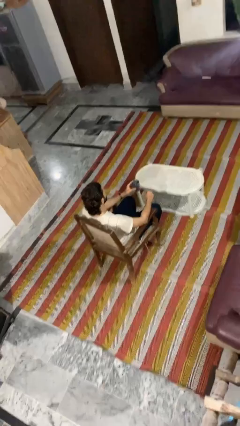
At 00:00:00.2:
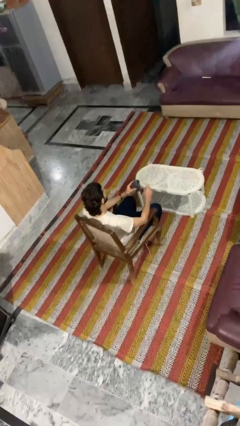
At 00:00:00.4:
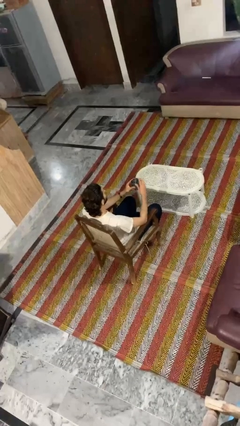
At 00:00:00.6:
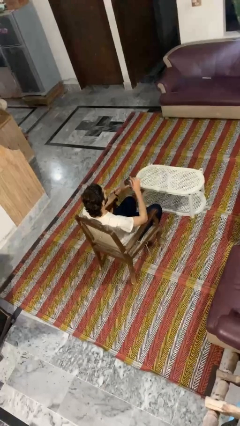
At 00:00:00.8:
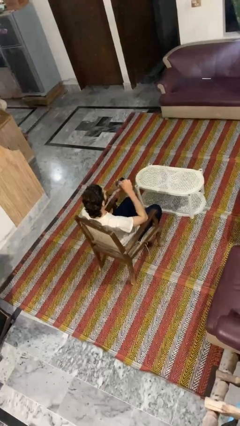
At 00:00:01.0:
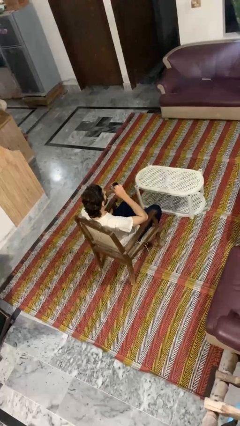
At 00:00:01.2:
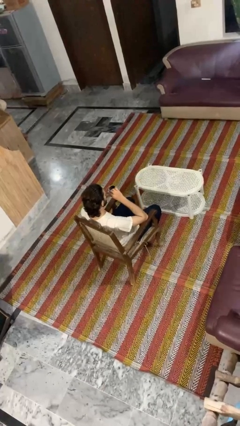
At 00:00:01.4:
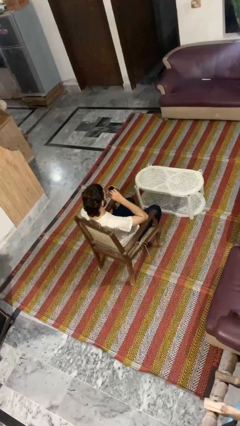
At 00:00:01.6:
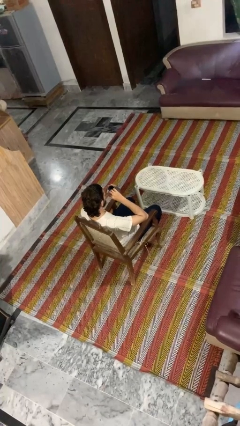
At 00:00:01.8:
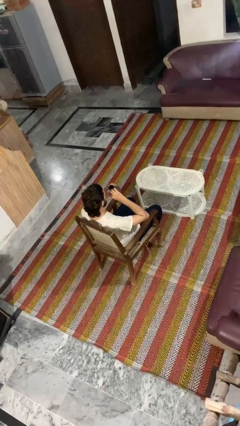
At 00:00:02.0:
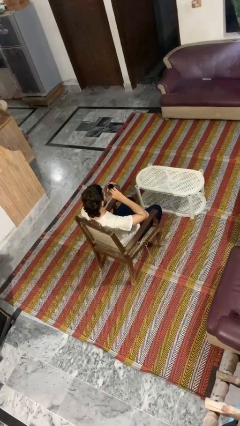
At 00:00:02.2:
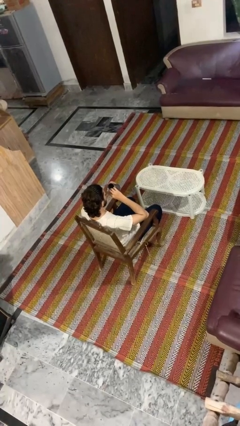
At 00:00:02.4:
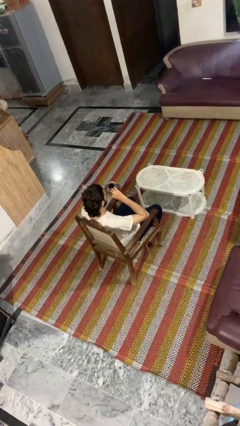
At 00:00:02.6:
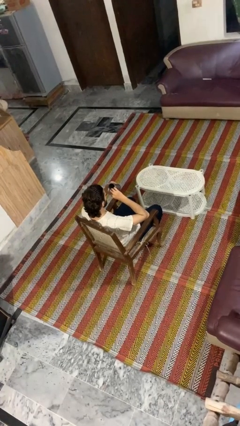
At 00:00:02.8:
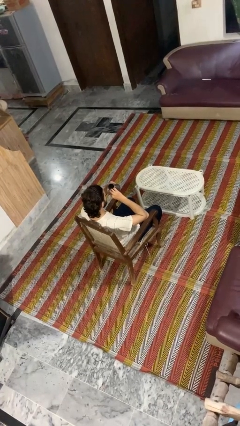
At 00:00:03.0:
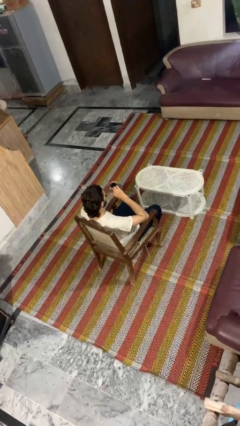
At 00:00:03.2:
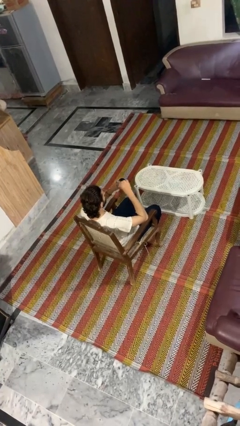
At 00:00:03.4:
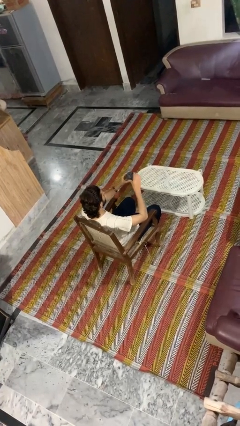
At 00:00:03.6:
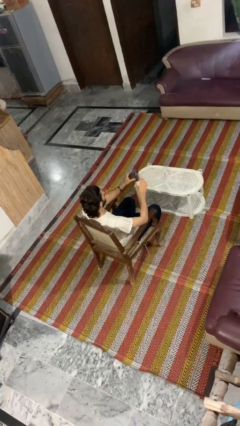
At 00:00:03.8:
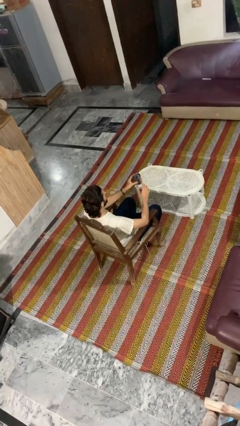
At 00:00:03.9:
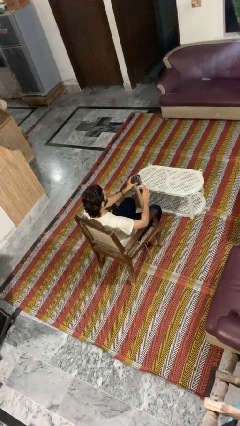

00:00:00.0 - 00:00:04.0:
person drinks from straw

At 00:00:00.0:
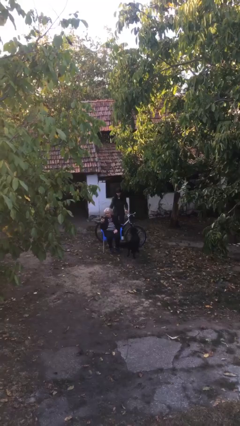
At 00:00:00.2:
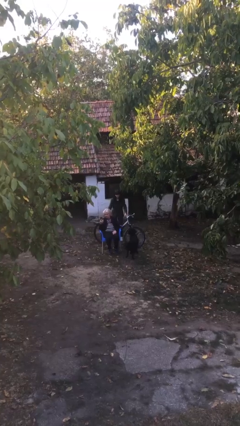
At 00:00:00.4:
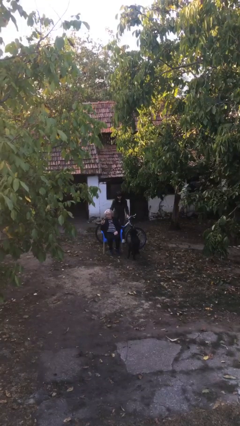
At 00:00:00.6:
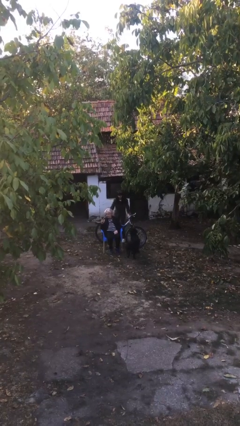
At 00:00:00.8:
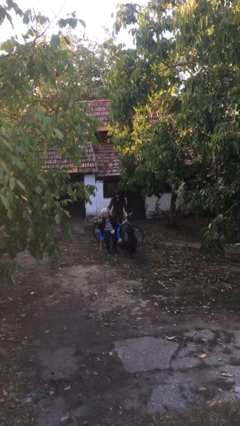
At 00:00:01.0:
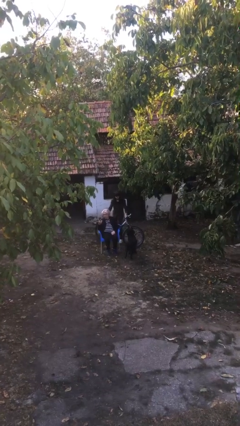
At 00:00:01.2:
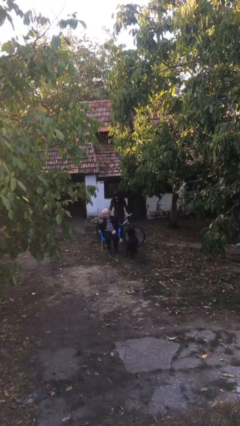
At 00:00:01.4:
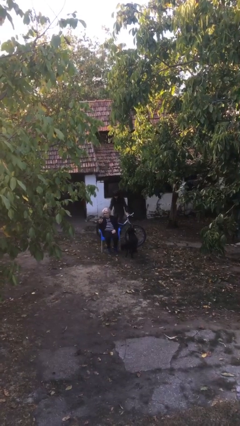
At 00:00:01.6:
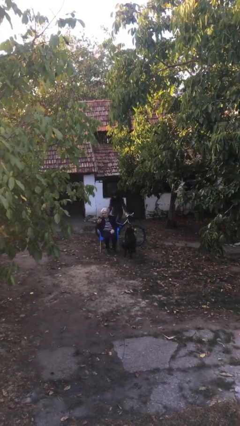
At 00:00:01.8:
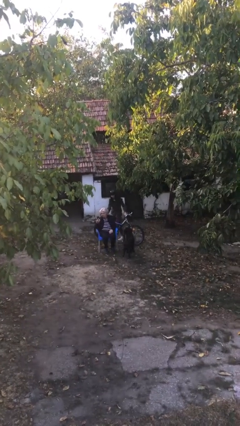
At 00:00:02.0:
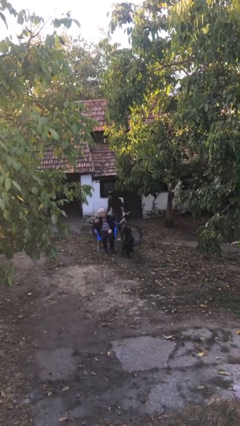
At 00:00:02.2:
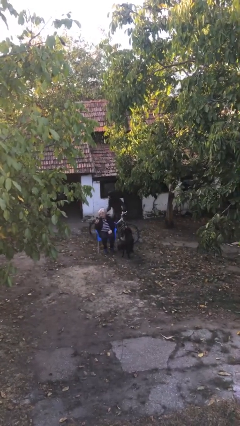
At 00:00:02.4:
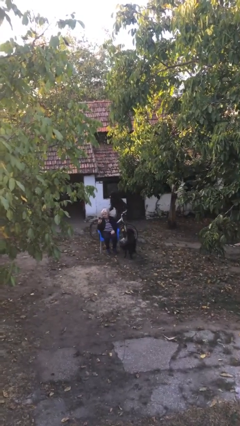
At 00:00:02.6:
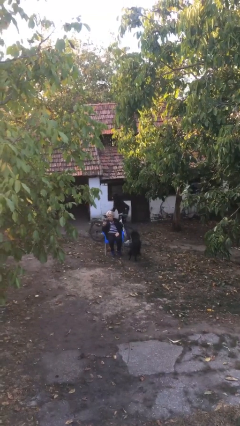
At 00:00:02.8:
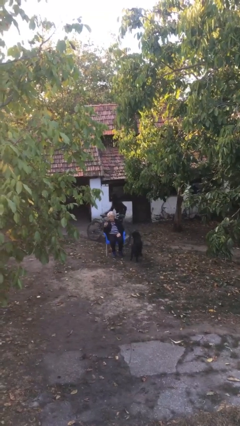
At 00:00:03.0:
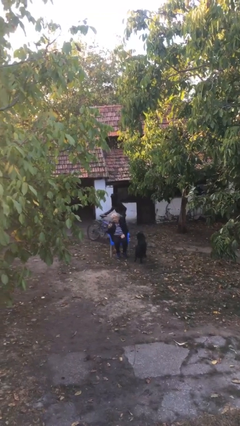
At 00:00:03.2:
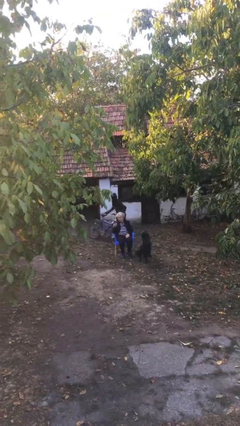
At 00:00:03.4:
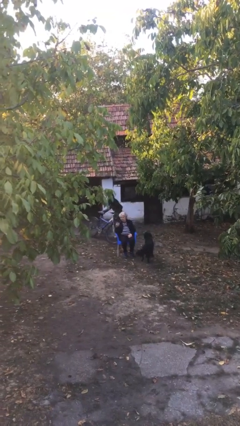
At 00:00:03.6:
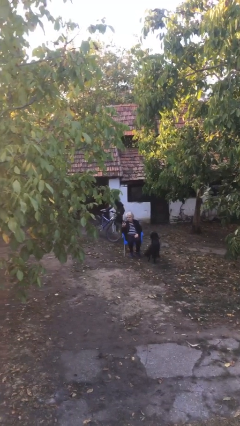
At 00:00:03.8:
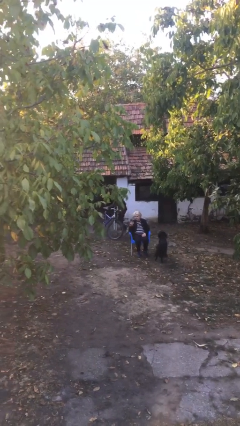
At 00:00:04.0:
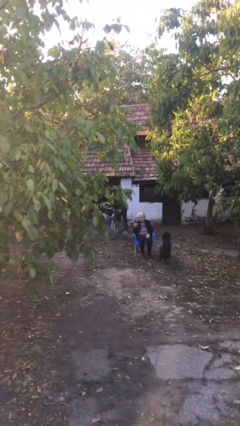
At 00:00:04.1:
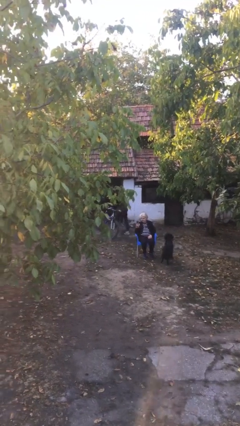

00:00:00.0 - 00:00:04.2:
person steals object from person

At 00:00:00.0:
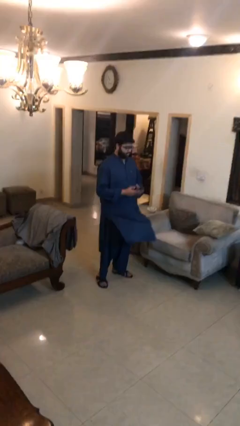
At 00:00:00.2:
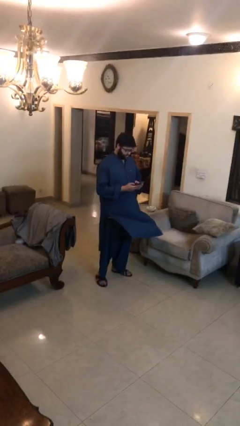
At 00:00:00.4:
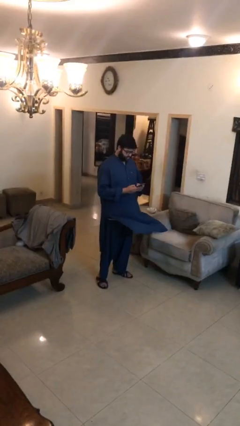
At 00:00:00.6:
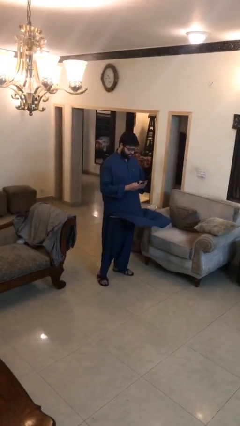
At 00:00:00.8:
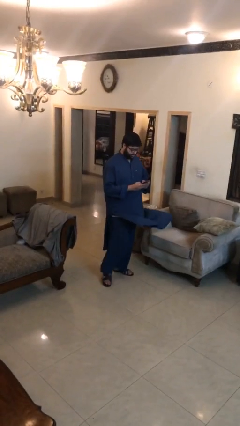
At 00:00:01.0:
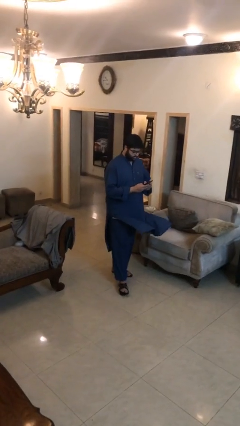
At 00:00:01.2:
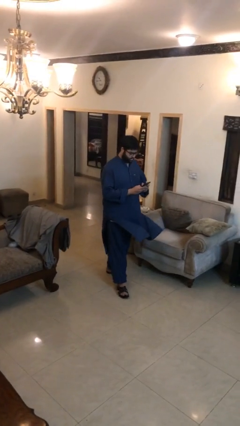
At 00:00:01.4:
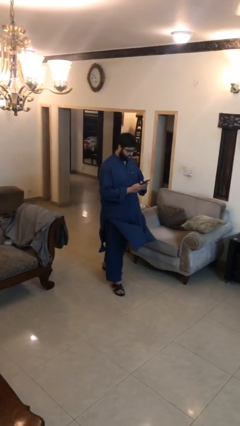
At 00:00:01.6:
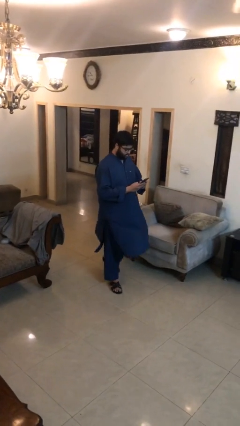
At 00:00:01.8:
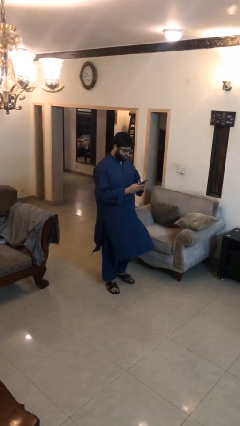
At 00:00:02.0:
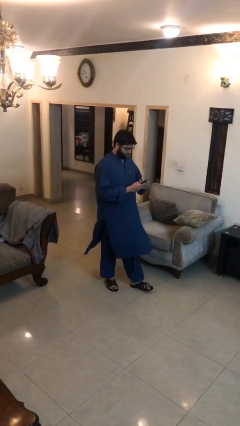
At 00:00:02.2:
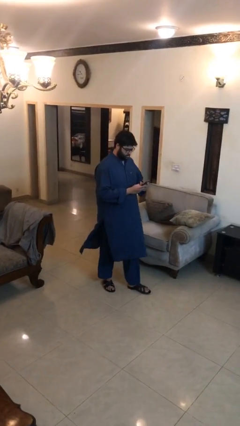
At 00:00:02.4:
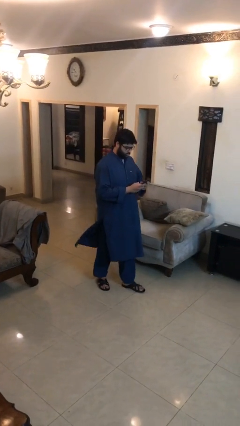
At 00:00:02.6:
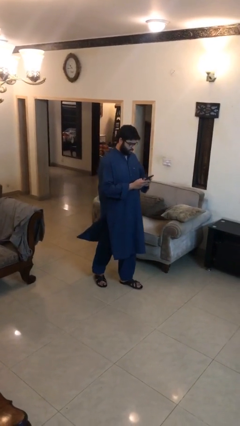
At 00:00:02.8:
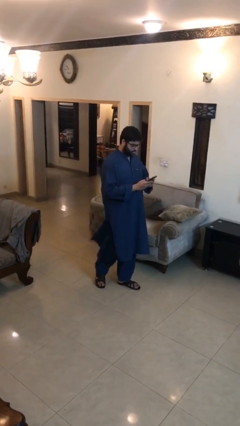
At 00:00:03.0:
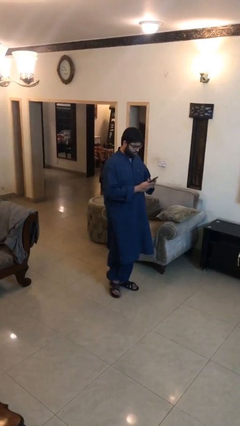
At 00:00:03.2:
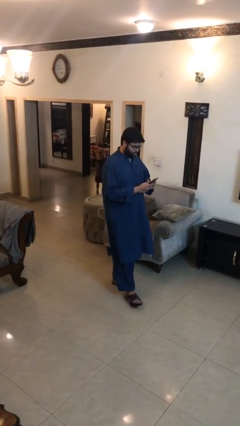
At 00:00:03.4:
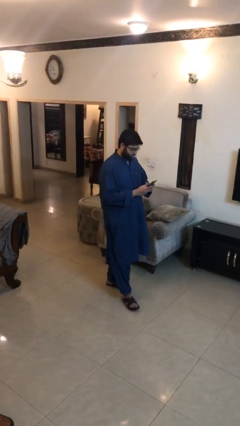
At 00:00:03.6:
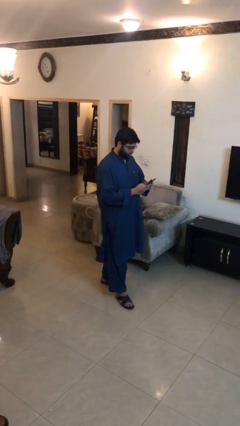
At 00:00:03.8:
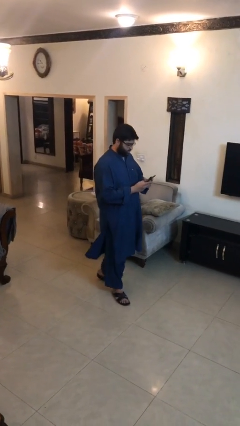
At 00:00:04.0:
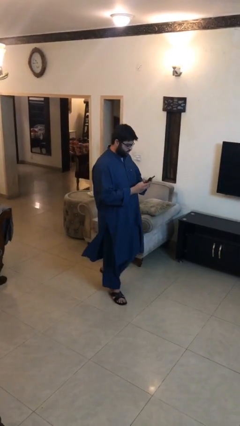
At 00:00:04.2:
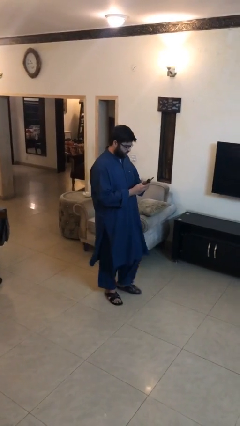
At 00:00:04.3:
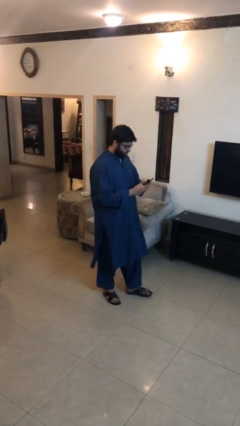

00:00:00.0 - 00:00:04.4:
person texts on phone

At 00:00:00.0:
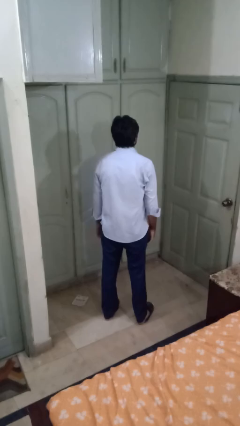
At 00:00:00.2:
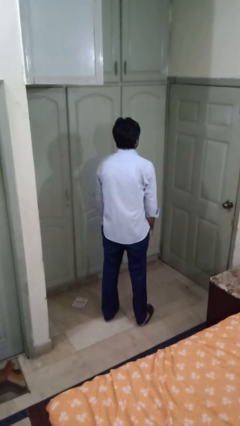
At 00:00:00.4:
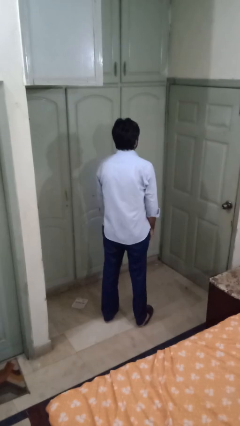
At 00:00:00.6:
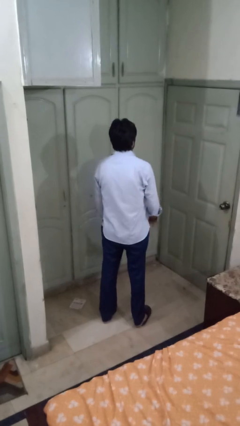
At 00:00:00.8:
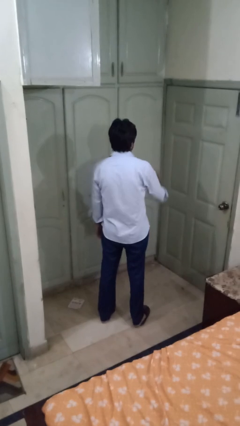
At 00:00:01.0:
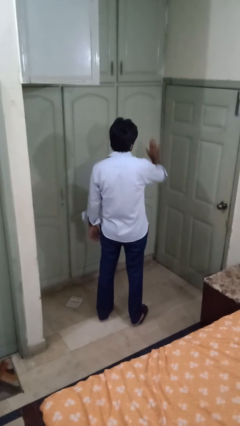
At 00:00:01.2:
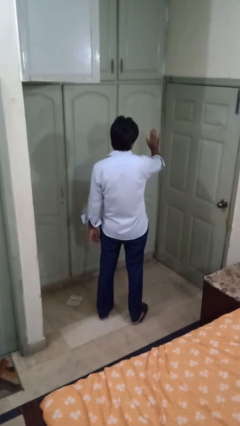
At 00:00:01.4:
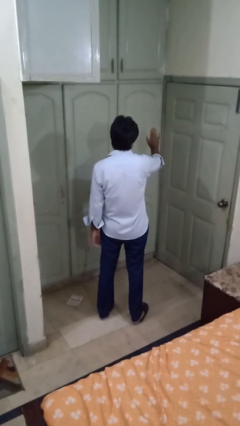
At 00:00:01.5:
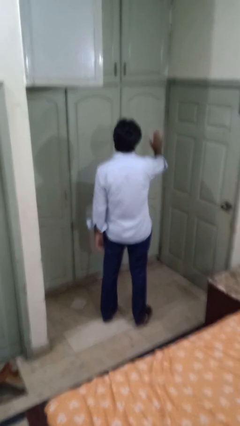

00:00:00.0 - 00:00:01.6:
person gestures stop

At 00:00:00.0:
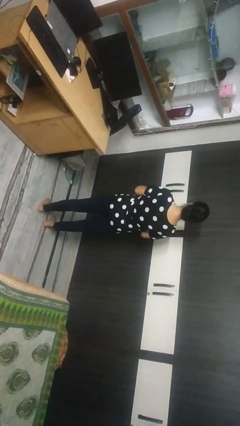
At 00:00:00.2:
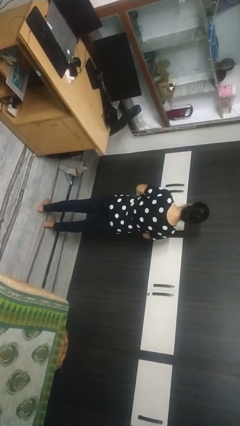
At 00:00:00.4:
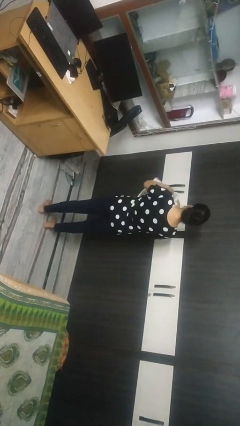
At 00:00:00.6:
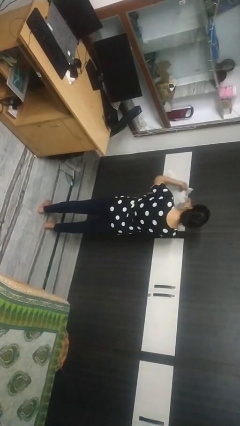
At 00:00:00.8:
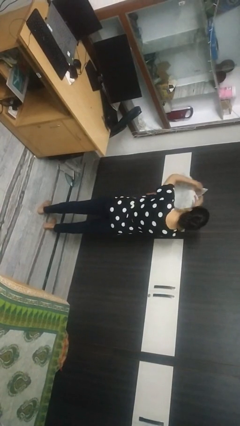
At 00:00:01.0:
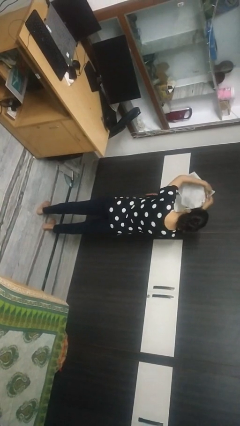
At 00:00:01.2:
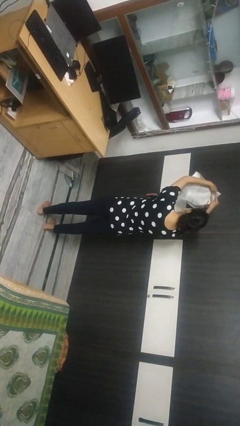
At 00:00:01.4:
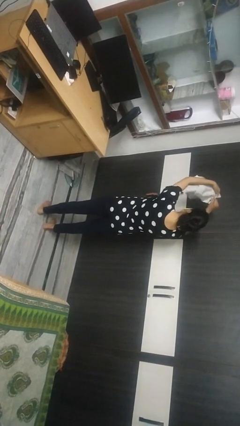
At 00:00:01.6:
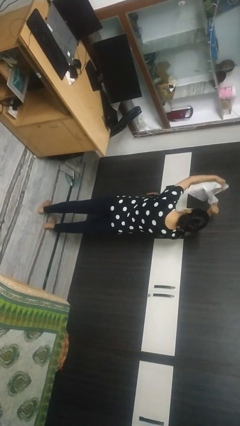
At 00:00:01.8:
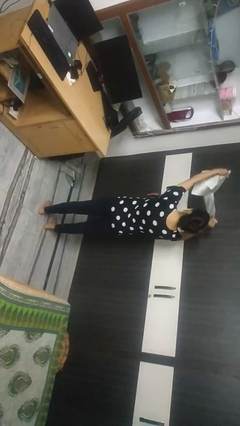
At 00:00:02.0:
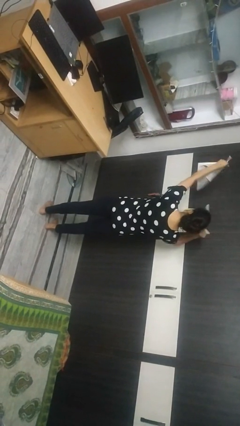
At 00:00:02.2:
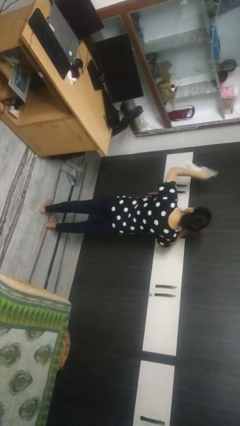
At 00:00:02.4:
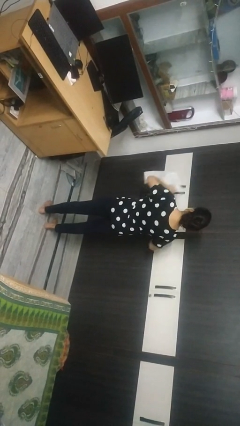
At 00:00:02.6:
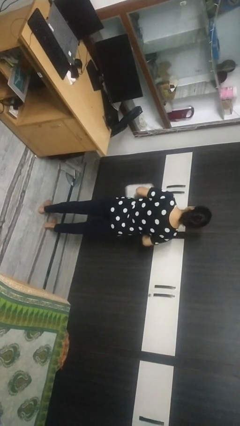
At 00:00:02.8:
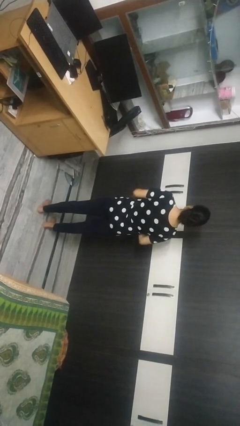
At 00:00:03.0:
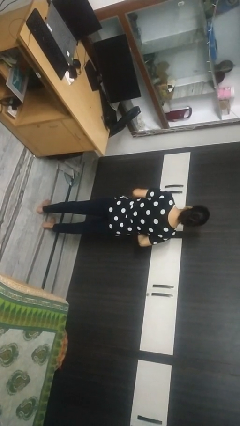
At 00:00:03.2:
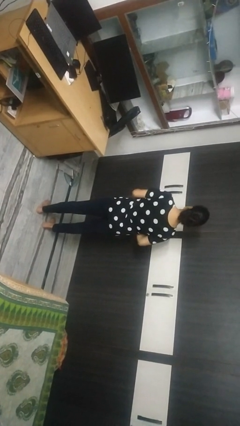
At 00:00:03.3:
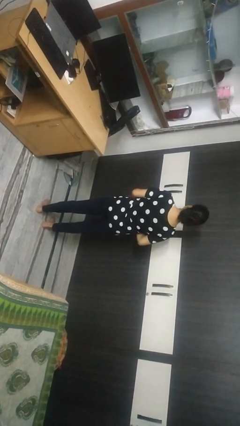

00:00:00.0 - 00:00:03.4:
person tears paper
